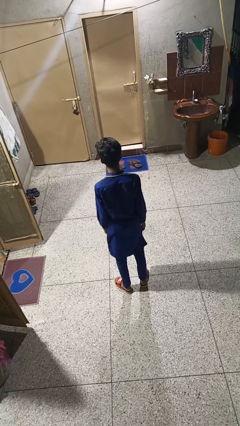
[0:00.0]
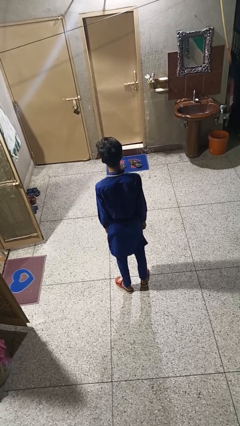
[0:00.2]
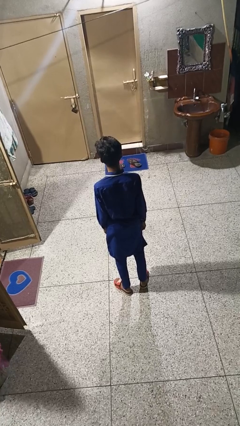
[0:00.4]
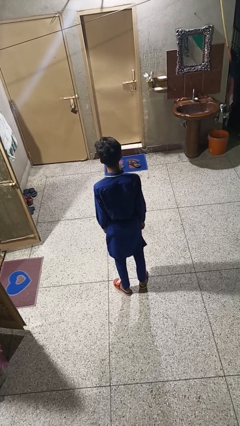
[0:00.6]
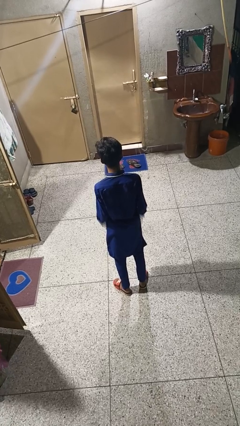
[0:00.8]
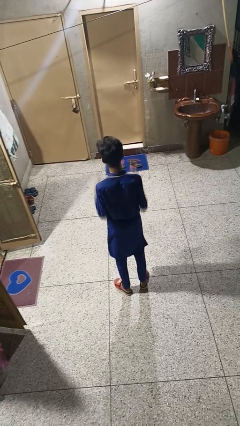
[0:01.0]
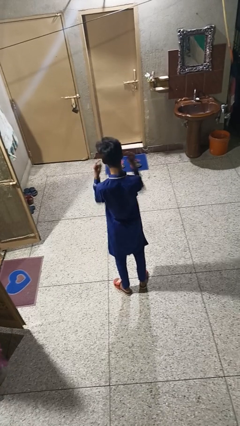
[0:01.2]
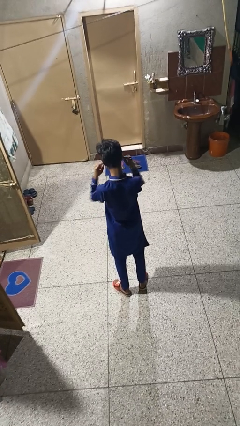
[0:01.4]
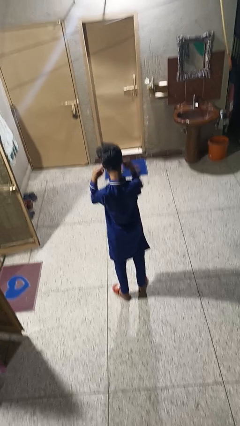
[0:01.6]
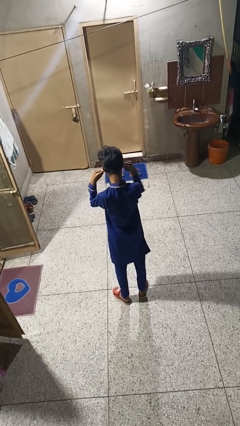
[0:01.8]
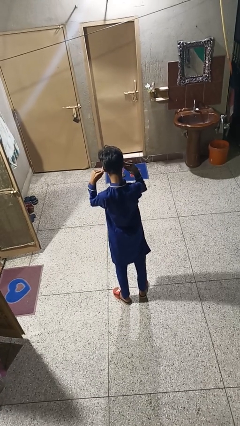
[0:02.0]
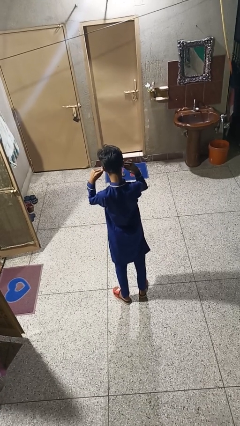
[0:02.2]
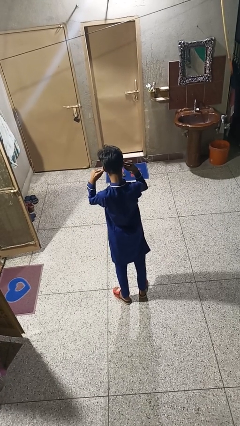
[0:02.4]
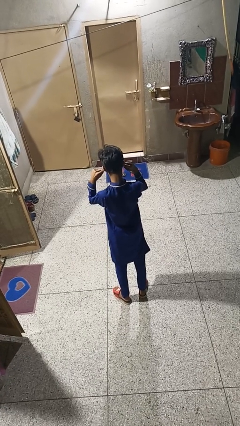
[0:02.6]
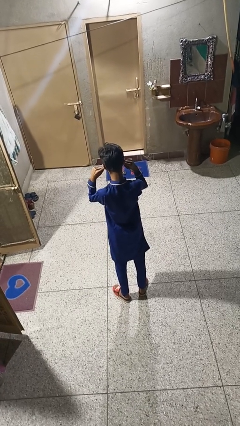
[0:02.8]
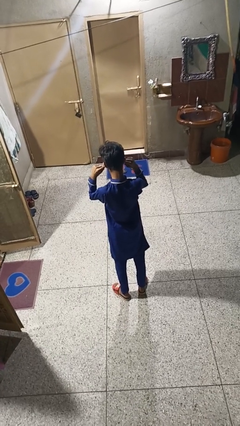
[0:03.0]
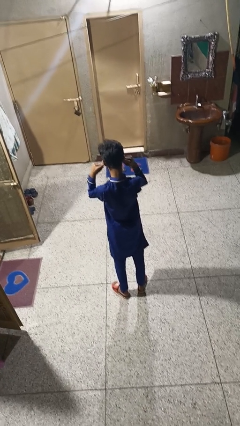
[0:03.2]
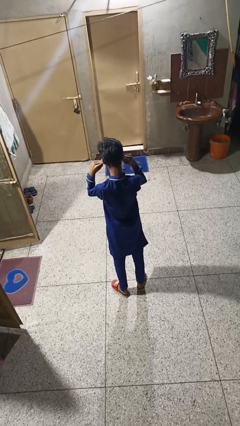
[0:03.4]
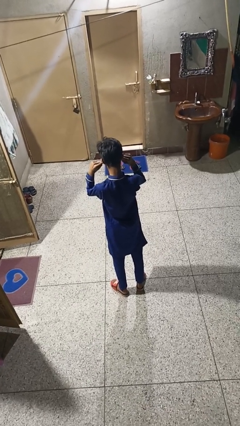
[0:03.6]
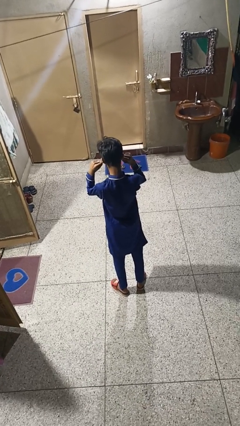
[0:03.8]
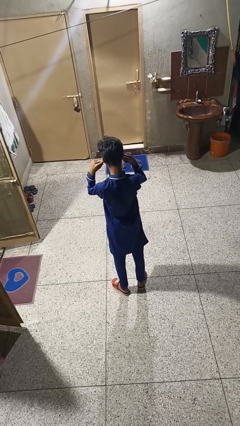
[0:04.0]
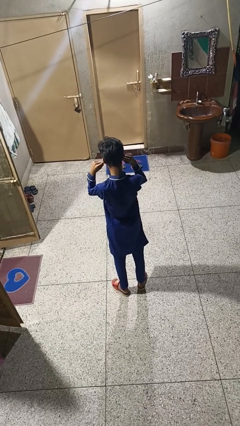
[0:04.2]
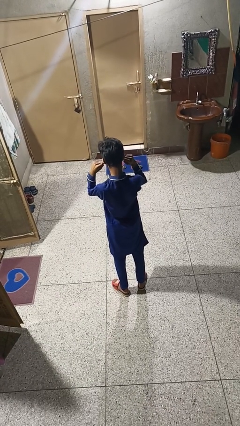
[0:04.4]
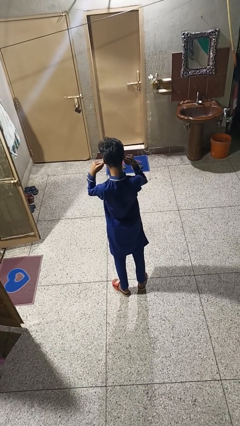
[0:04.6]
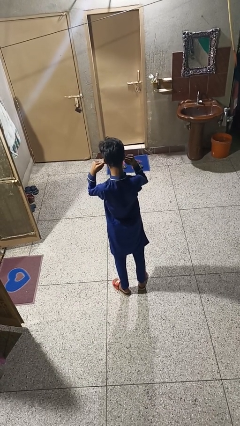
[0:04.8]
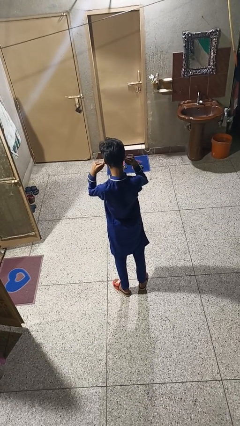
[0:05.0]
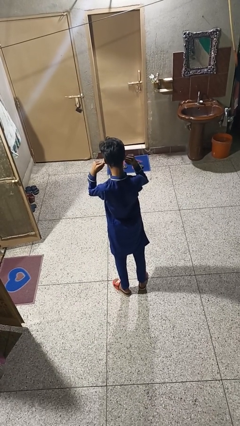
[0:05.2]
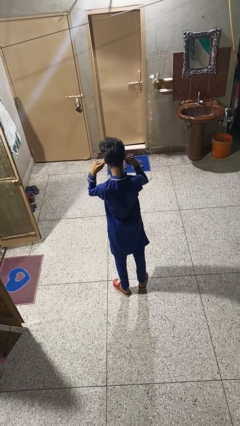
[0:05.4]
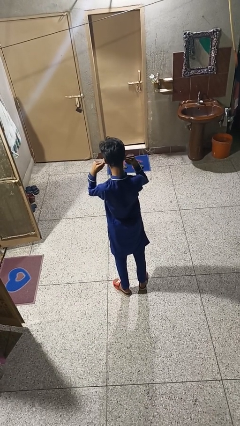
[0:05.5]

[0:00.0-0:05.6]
person puts fingers in ear

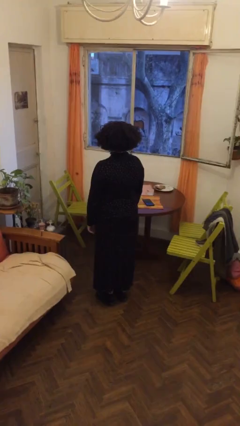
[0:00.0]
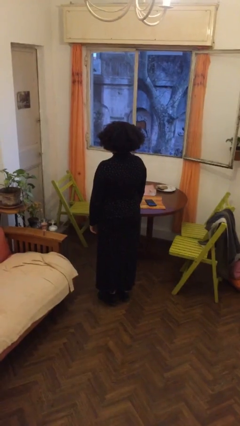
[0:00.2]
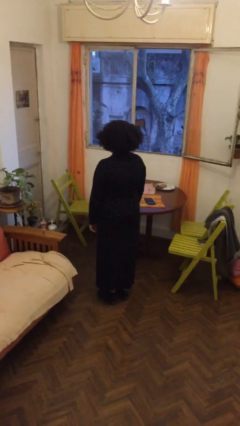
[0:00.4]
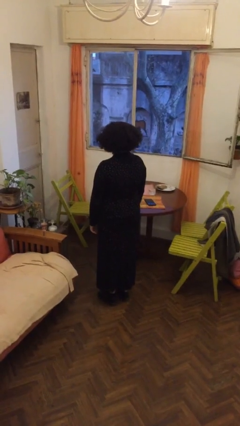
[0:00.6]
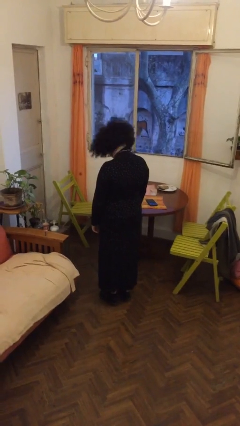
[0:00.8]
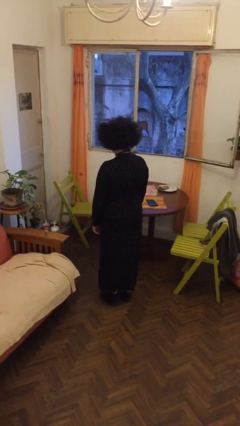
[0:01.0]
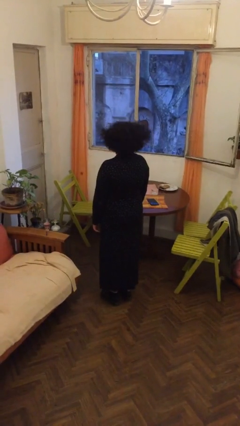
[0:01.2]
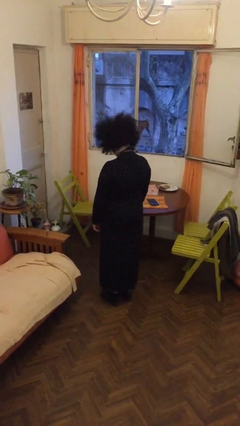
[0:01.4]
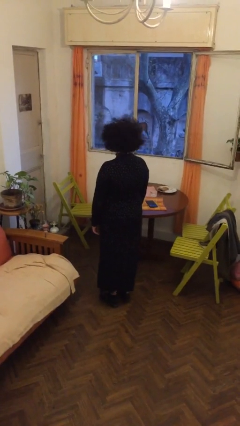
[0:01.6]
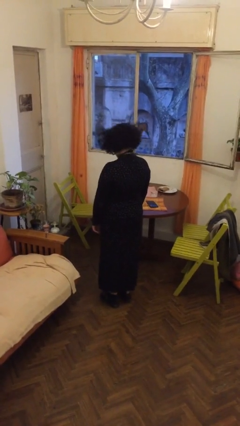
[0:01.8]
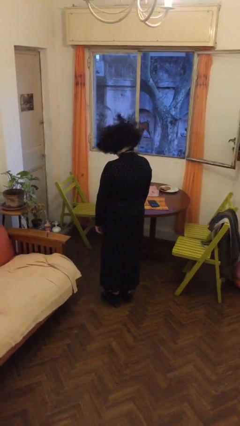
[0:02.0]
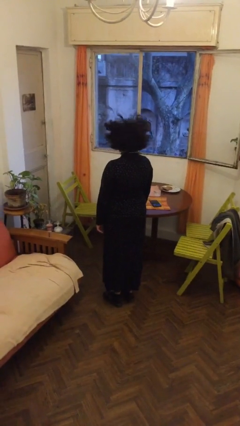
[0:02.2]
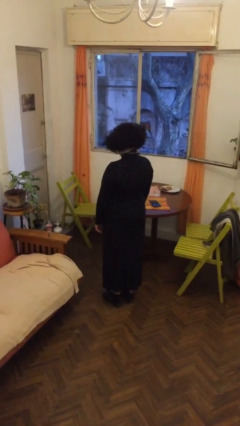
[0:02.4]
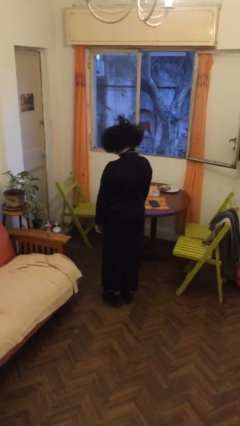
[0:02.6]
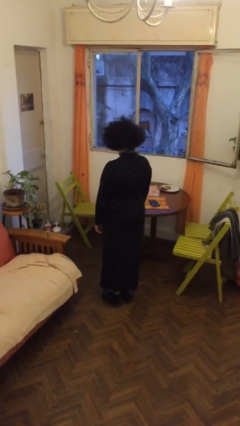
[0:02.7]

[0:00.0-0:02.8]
person nods head

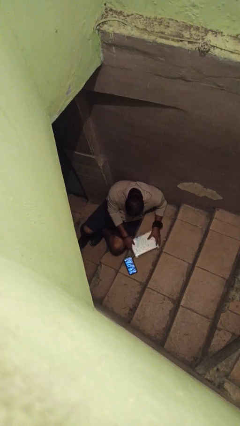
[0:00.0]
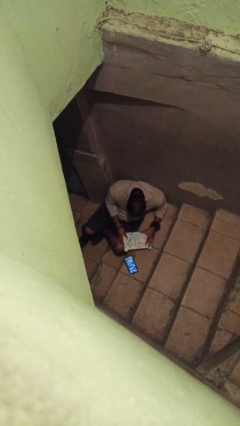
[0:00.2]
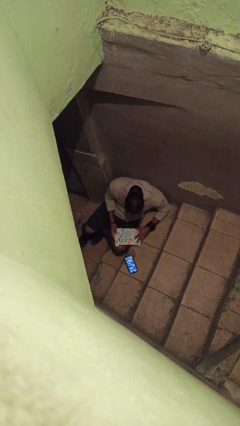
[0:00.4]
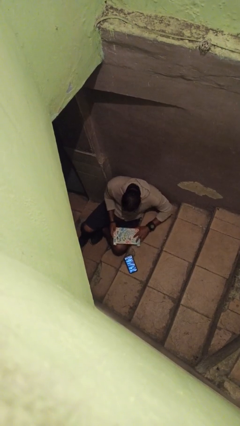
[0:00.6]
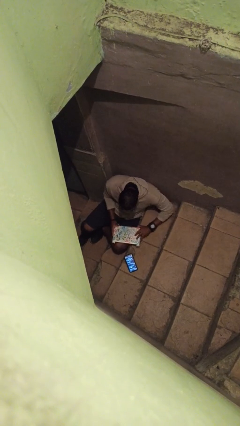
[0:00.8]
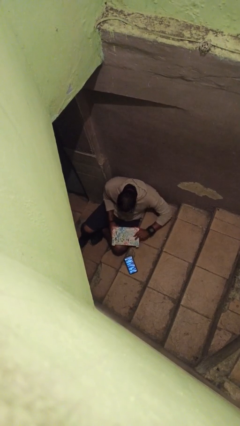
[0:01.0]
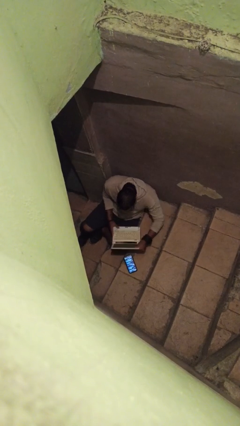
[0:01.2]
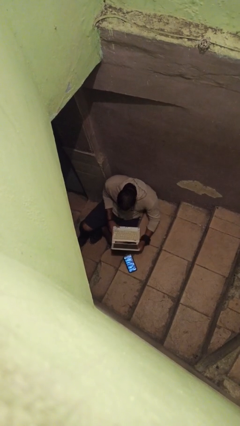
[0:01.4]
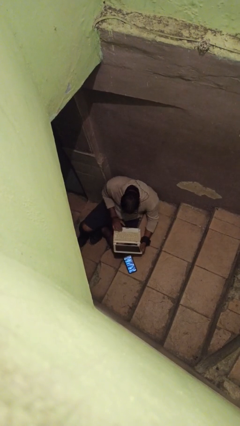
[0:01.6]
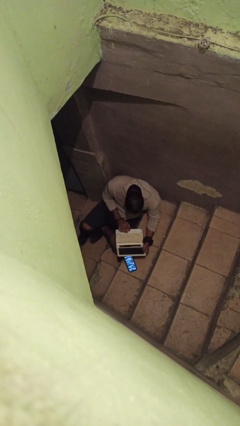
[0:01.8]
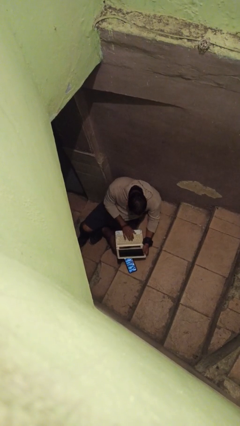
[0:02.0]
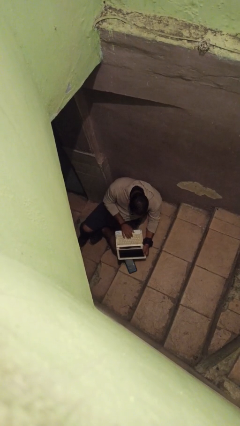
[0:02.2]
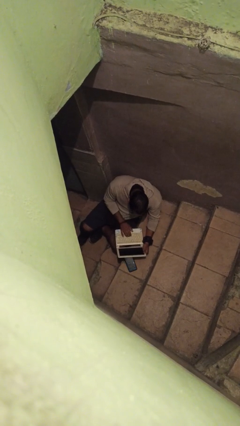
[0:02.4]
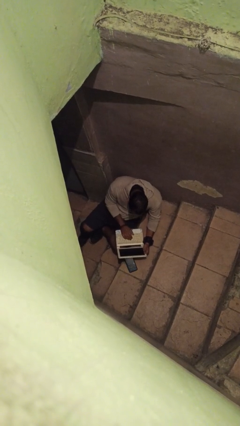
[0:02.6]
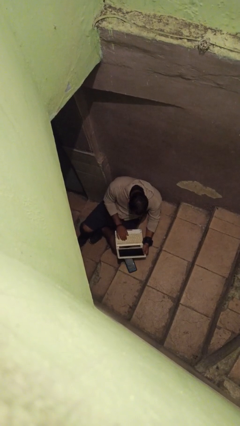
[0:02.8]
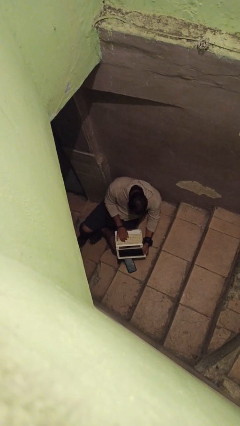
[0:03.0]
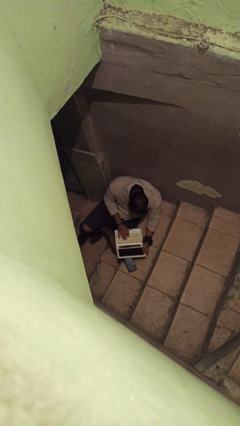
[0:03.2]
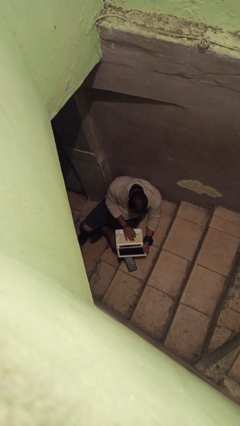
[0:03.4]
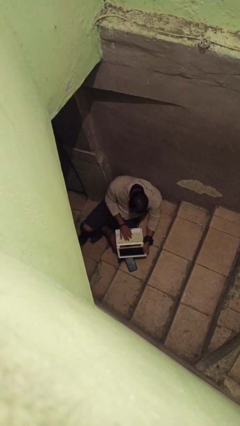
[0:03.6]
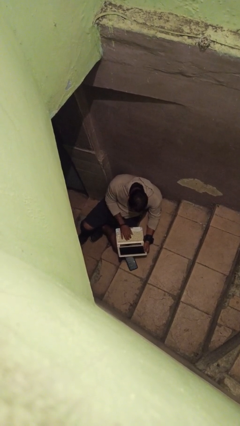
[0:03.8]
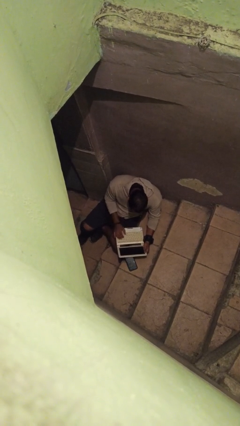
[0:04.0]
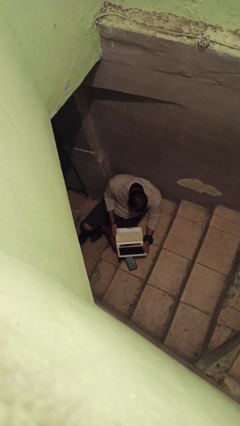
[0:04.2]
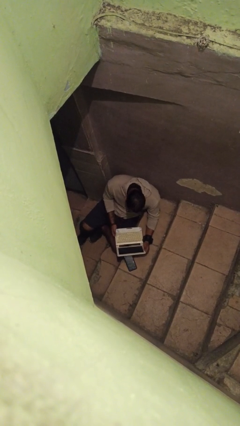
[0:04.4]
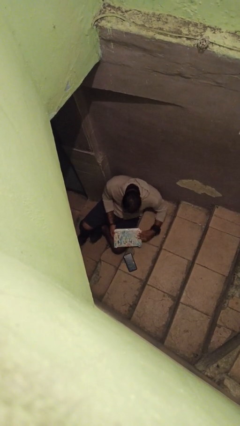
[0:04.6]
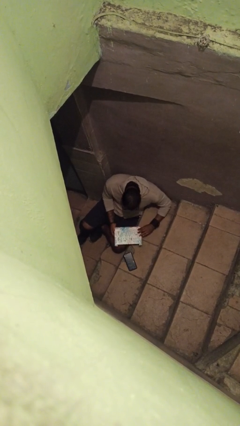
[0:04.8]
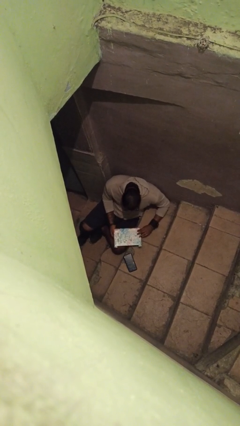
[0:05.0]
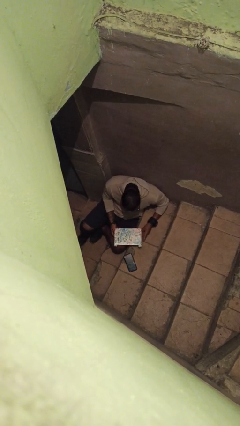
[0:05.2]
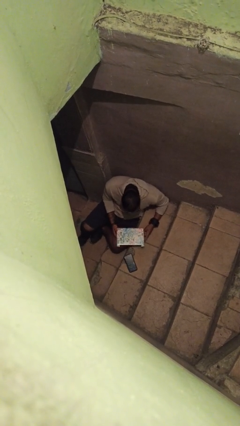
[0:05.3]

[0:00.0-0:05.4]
person interacts with laptop

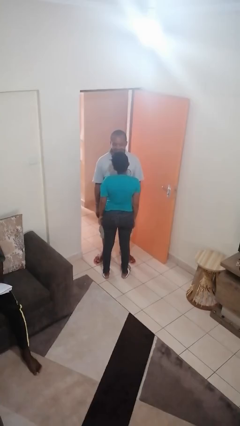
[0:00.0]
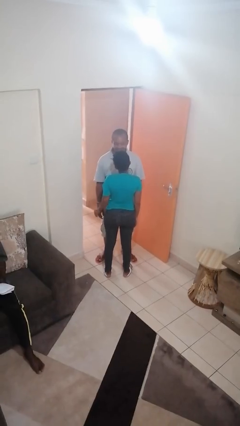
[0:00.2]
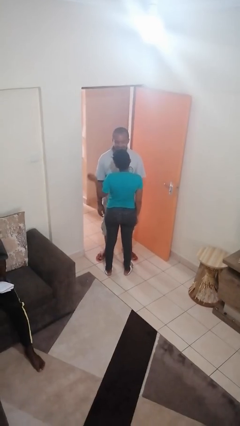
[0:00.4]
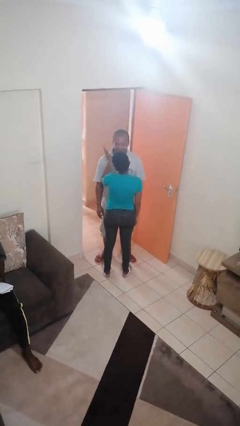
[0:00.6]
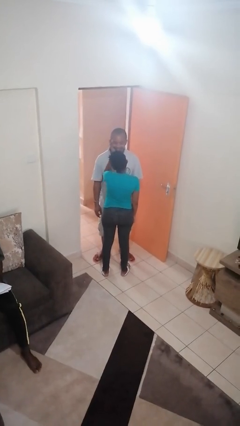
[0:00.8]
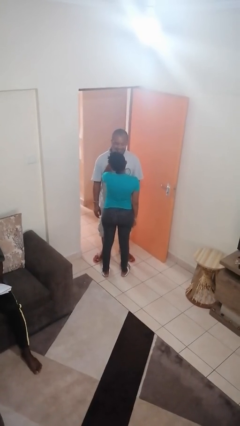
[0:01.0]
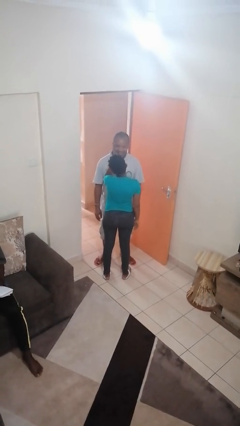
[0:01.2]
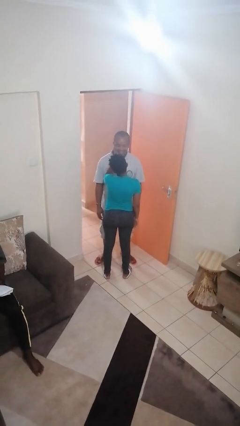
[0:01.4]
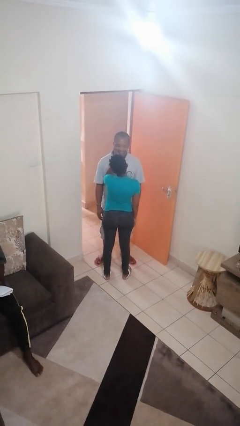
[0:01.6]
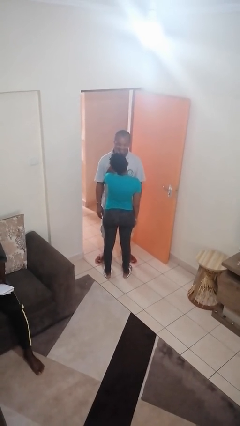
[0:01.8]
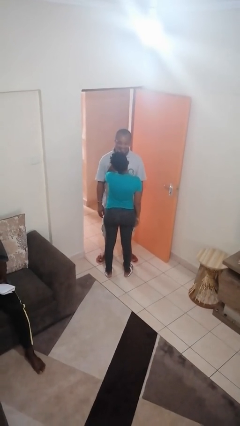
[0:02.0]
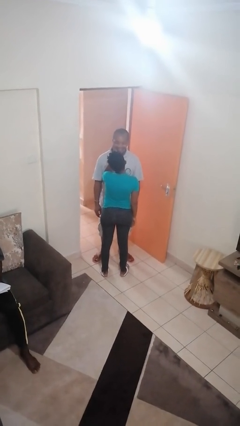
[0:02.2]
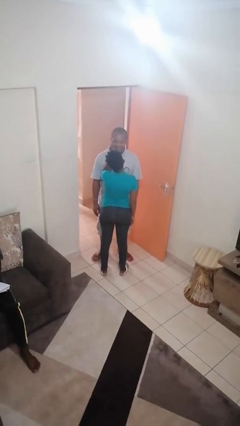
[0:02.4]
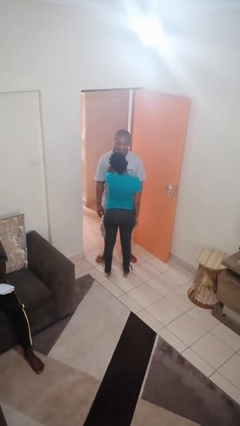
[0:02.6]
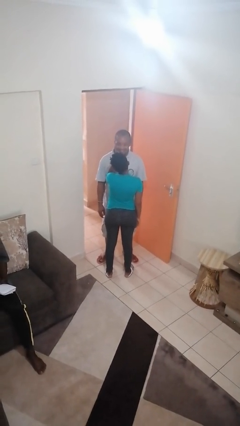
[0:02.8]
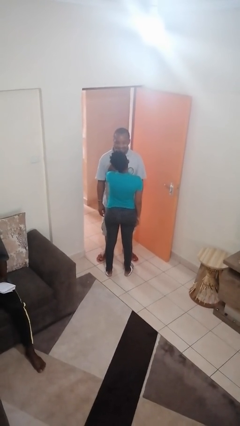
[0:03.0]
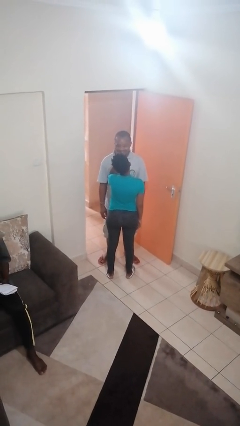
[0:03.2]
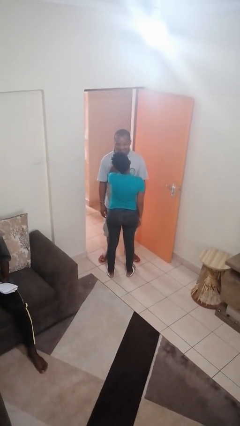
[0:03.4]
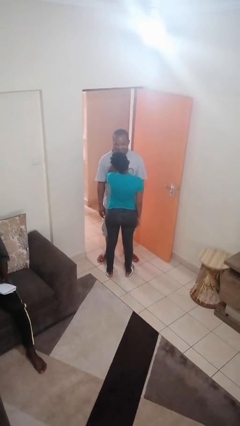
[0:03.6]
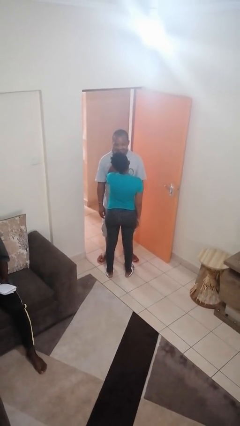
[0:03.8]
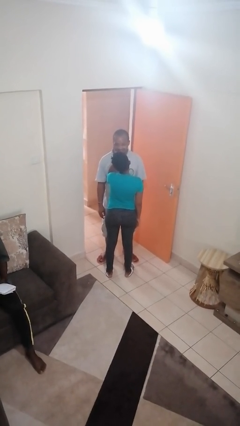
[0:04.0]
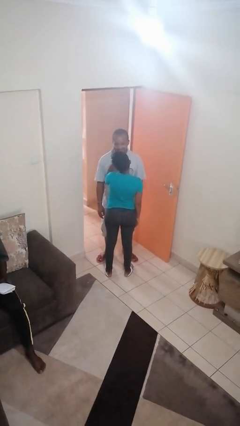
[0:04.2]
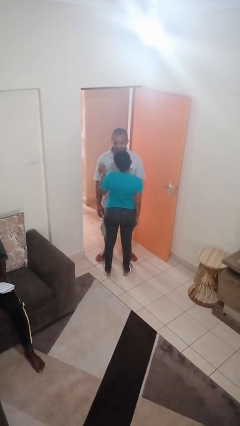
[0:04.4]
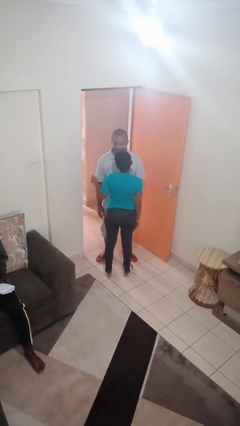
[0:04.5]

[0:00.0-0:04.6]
person touches face of person
